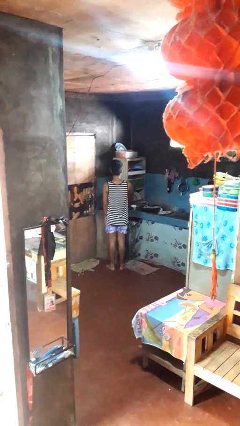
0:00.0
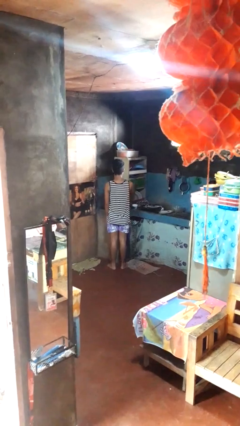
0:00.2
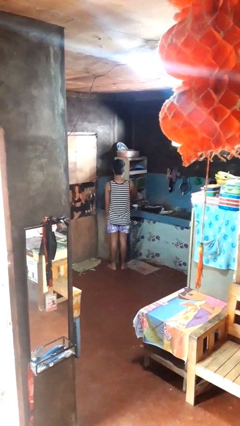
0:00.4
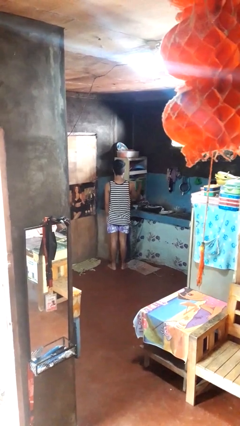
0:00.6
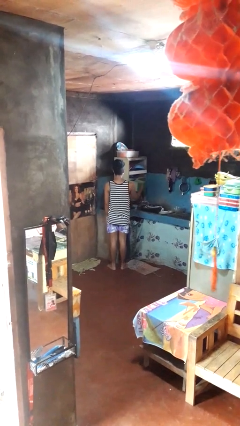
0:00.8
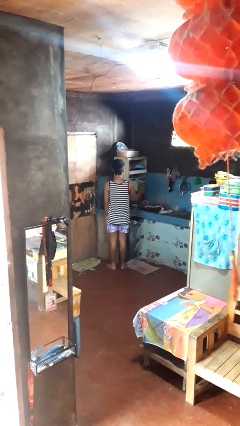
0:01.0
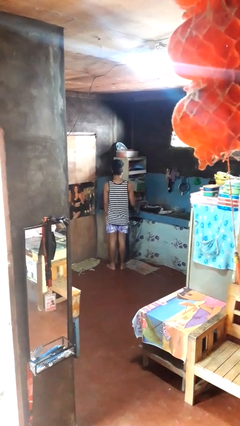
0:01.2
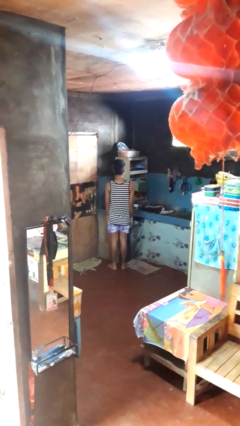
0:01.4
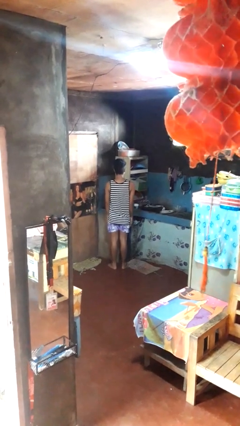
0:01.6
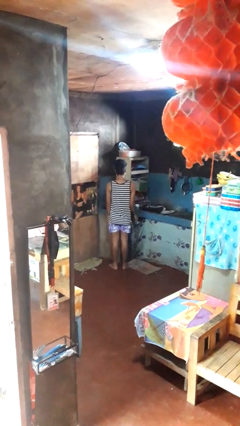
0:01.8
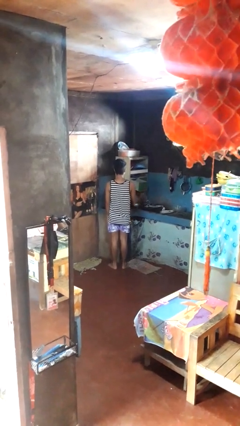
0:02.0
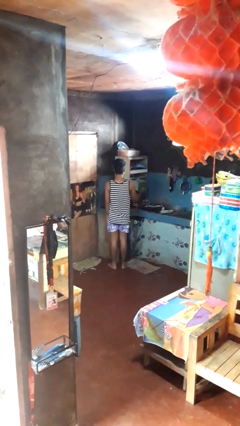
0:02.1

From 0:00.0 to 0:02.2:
person opens kitchen drawer

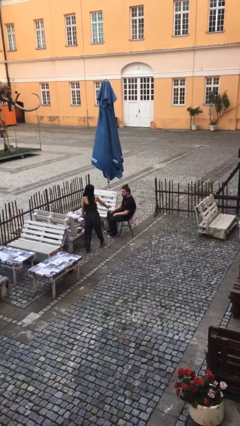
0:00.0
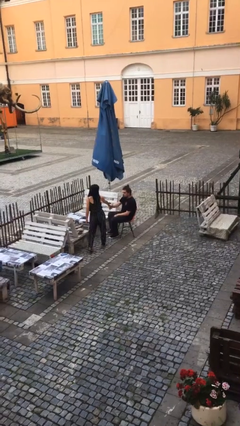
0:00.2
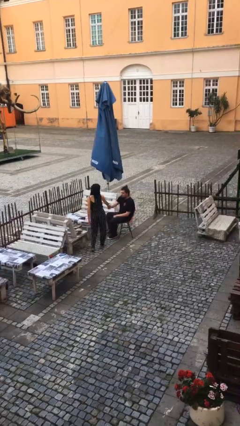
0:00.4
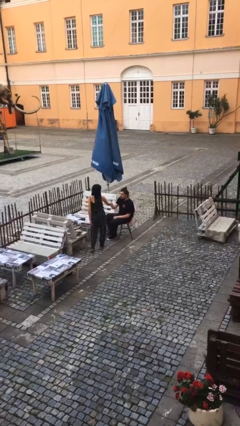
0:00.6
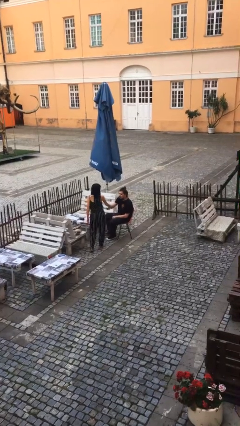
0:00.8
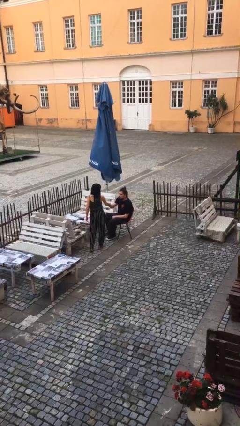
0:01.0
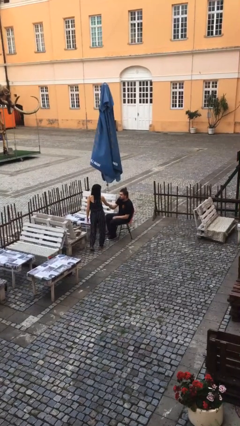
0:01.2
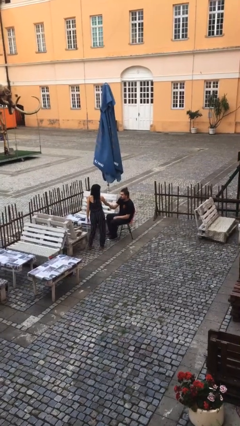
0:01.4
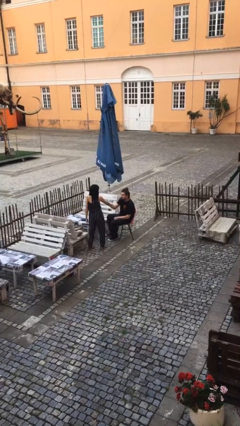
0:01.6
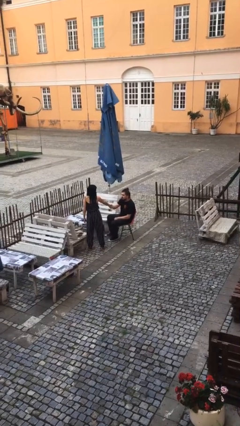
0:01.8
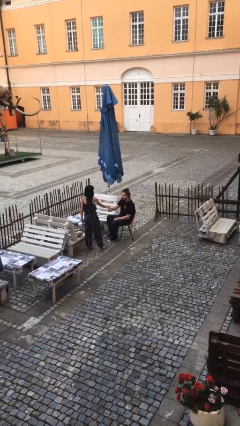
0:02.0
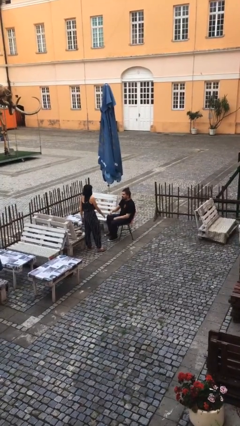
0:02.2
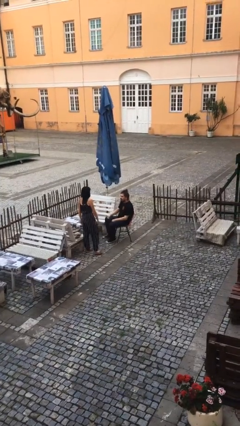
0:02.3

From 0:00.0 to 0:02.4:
person shakes hand

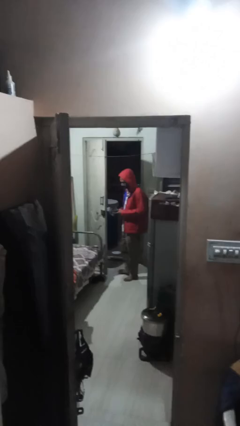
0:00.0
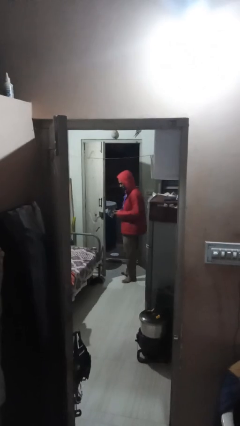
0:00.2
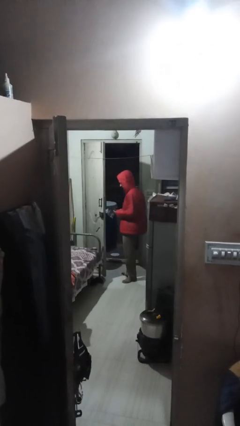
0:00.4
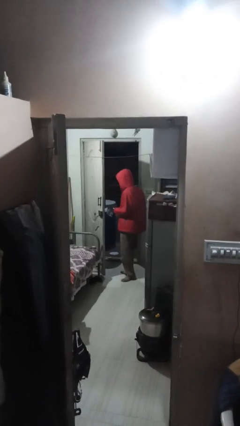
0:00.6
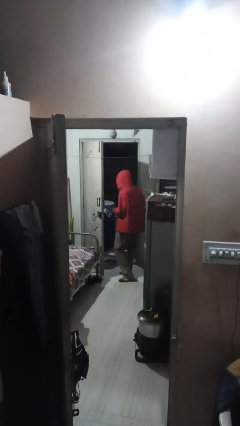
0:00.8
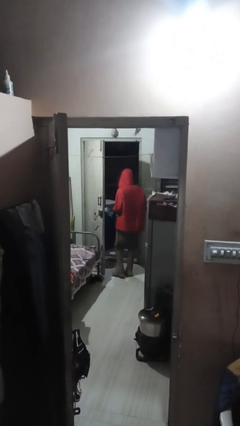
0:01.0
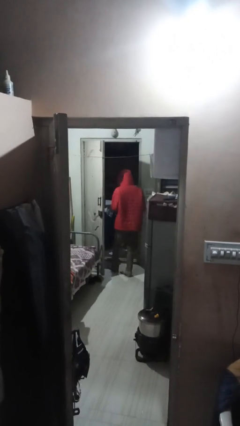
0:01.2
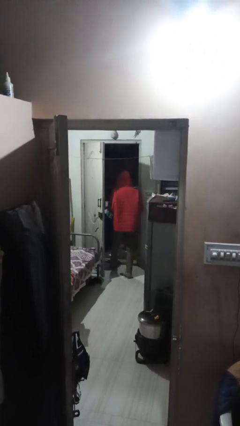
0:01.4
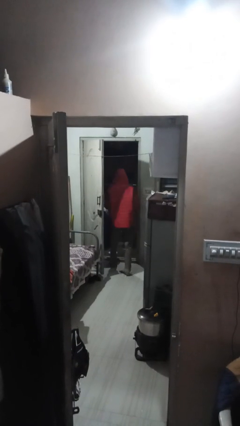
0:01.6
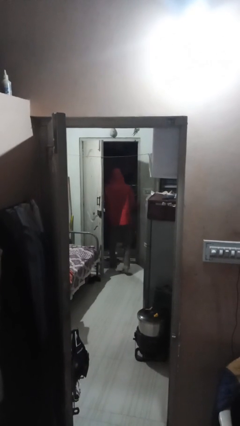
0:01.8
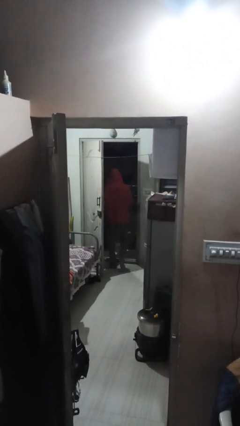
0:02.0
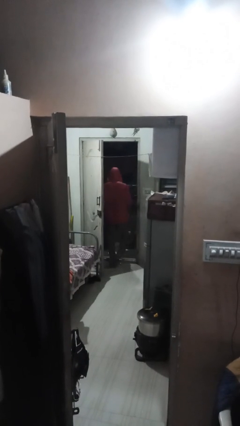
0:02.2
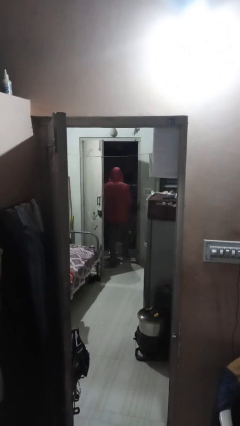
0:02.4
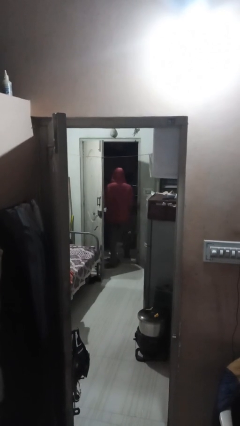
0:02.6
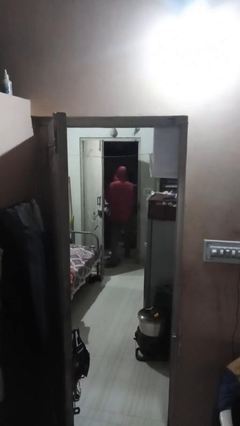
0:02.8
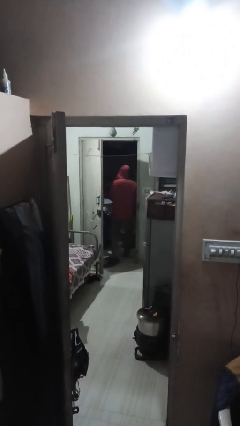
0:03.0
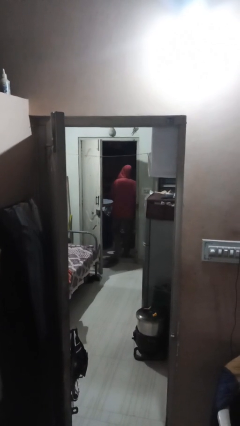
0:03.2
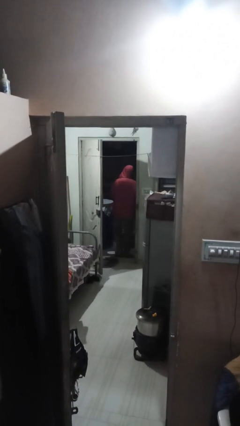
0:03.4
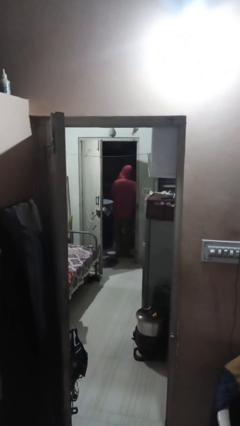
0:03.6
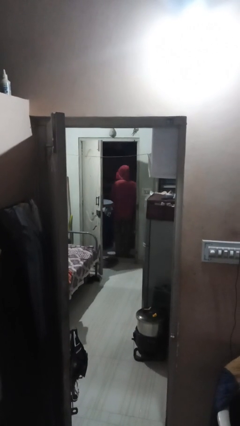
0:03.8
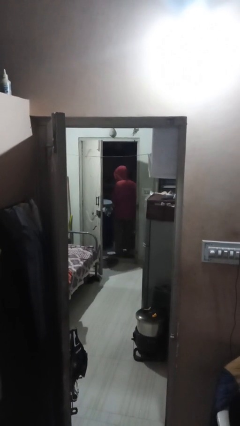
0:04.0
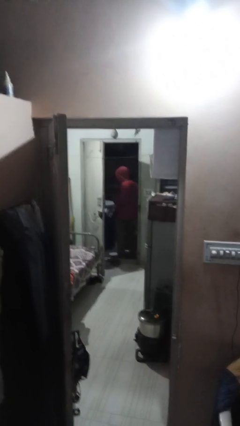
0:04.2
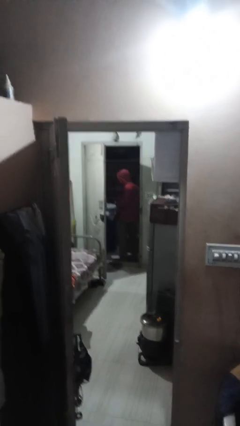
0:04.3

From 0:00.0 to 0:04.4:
person exits scene through structure

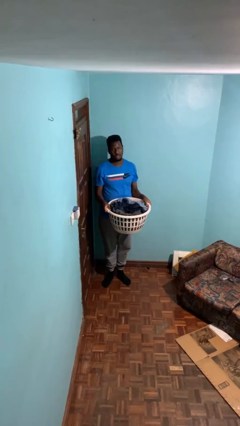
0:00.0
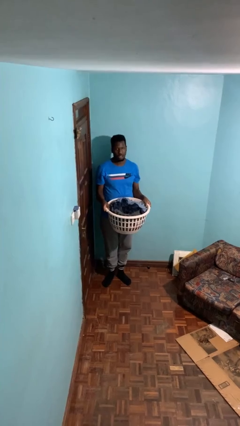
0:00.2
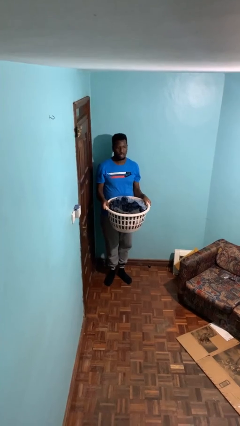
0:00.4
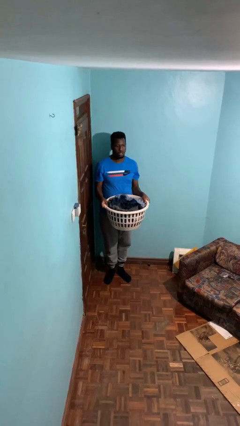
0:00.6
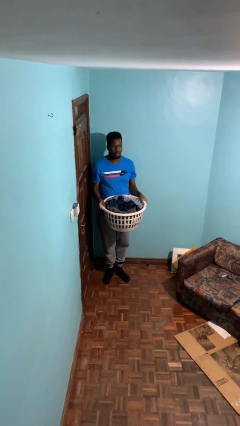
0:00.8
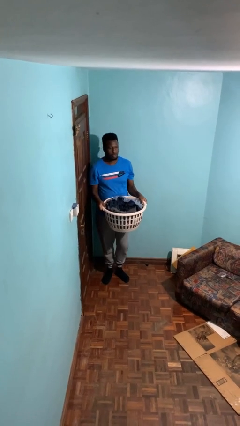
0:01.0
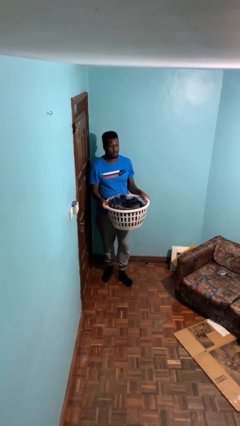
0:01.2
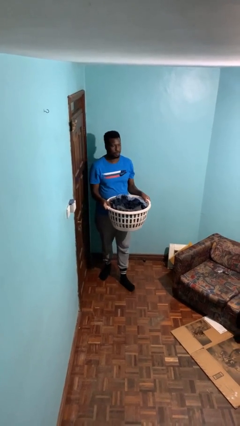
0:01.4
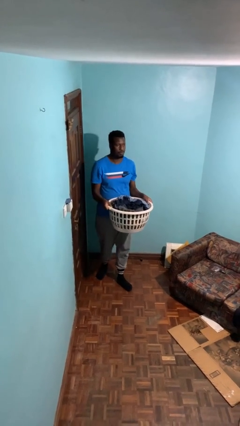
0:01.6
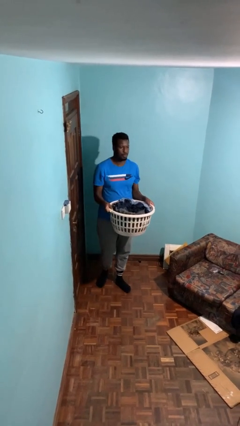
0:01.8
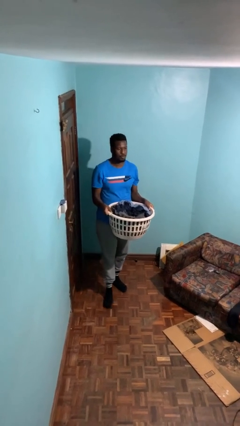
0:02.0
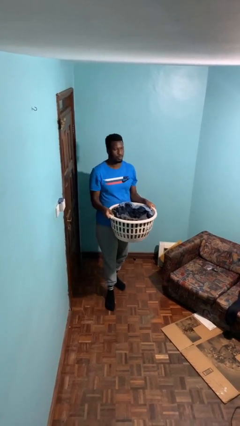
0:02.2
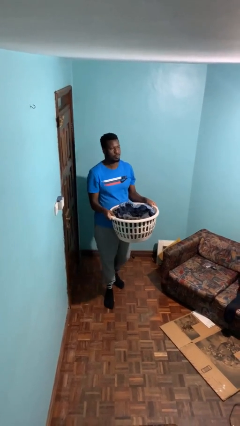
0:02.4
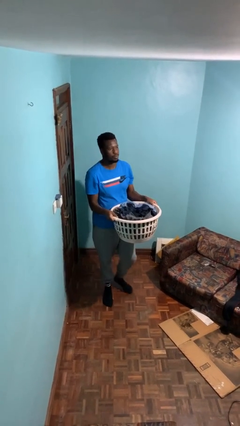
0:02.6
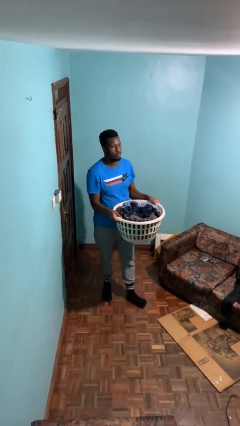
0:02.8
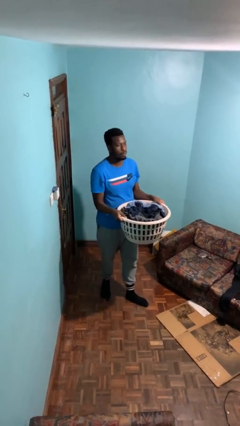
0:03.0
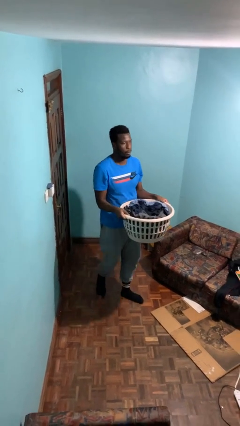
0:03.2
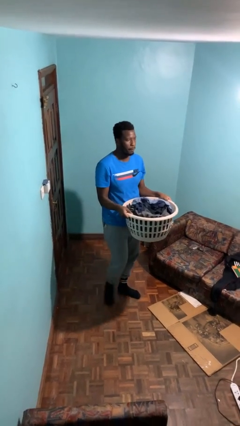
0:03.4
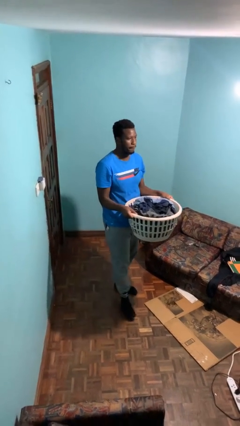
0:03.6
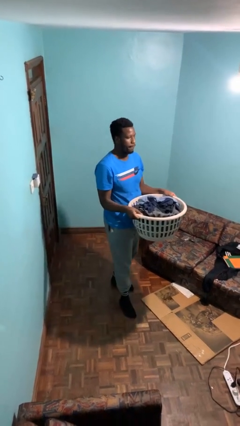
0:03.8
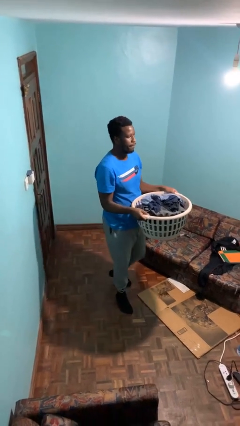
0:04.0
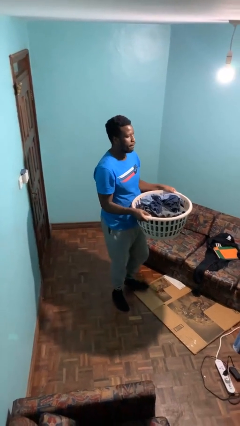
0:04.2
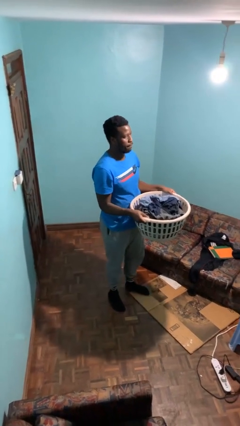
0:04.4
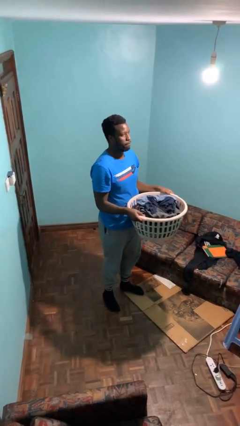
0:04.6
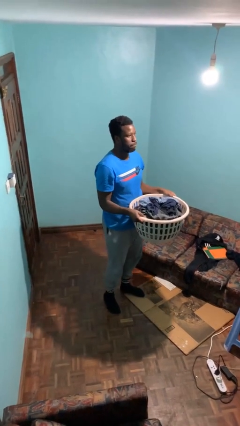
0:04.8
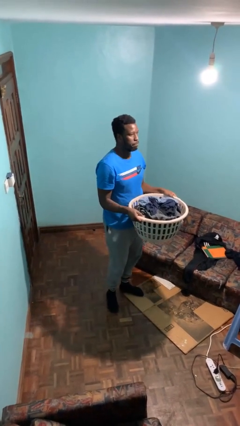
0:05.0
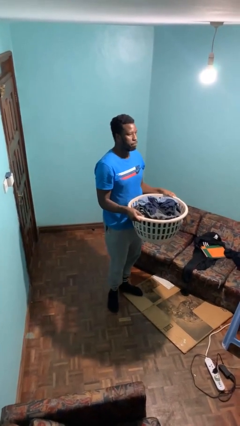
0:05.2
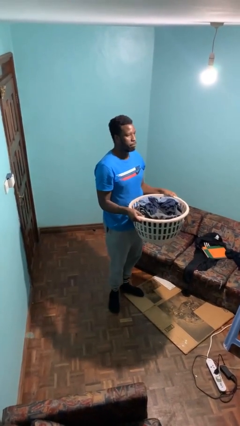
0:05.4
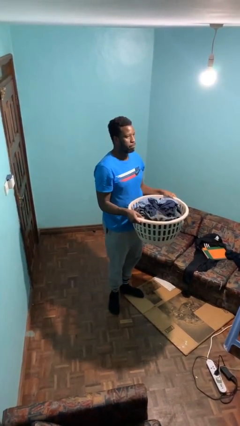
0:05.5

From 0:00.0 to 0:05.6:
person carries laundry basket

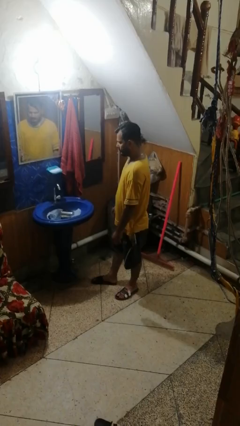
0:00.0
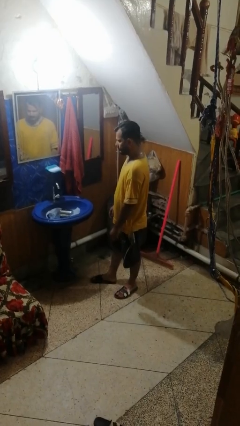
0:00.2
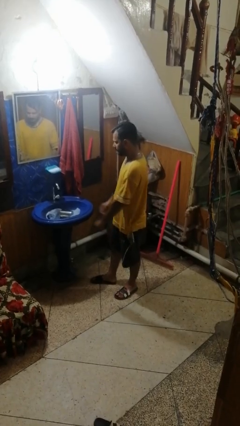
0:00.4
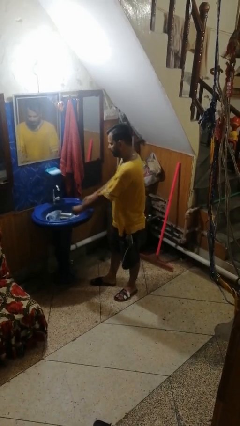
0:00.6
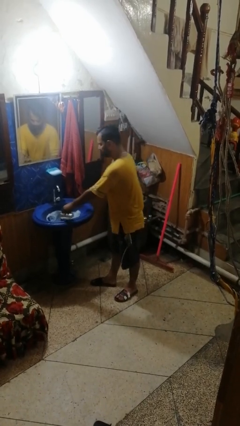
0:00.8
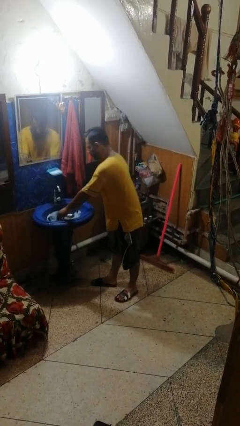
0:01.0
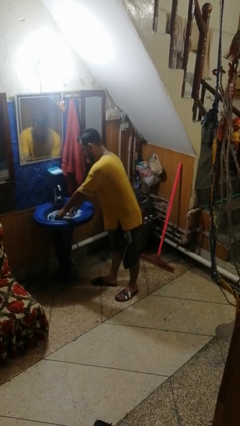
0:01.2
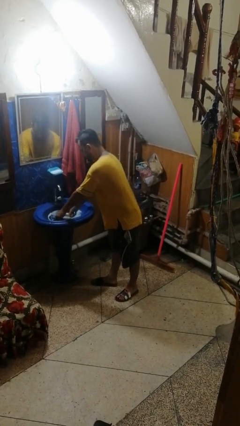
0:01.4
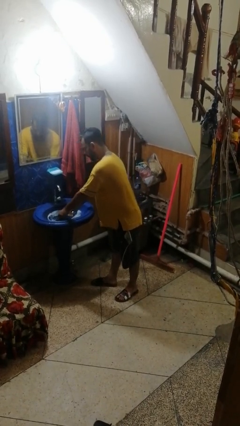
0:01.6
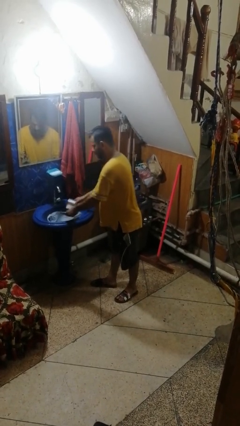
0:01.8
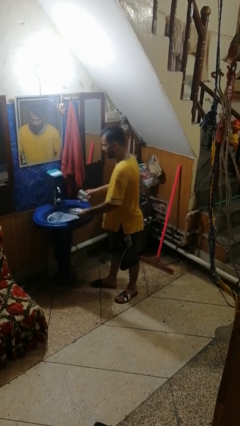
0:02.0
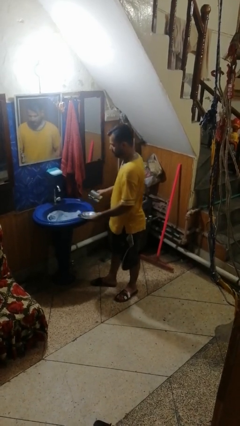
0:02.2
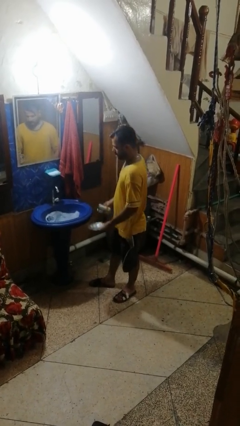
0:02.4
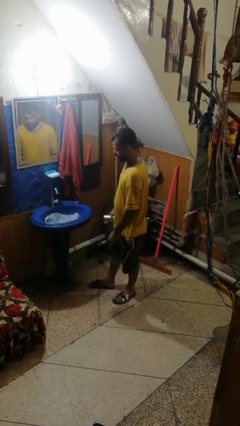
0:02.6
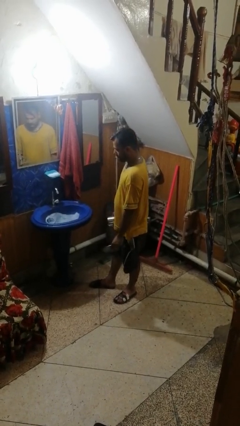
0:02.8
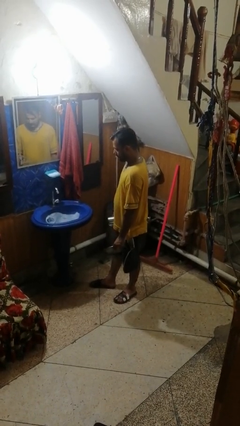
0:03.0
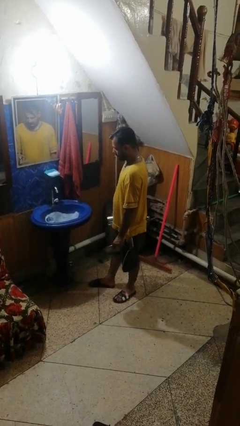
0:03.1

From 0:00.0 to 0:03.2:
person unloads dishwasher
